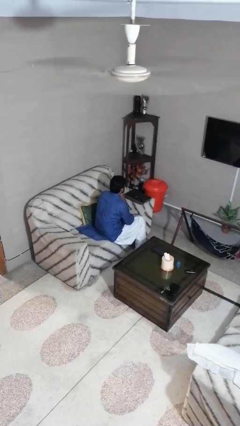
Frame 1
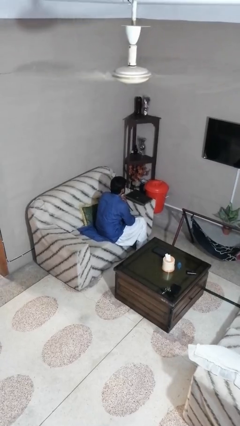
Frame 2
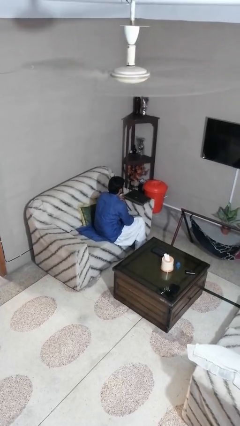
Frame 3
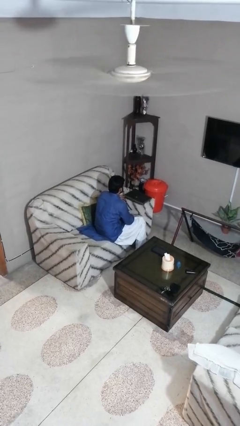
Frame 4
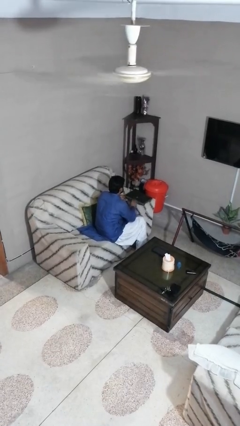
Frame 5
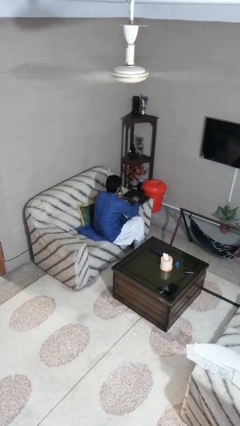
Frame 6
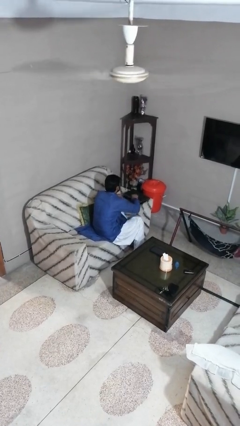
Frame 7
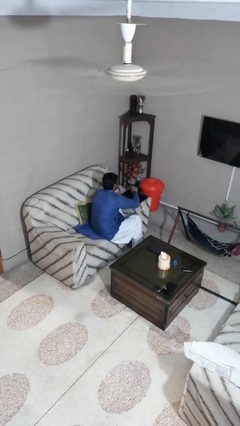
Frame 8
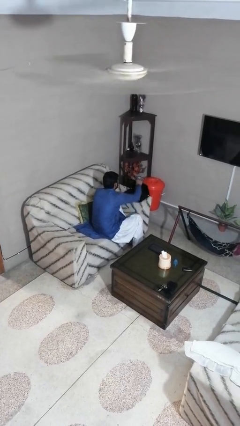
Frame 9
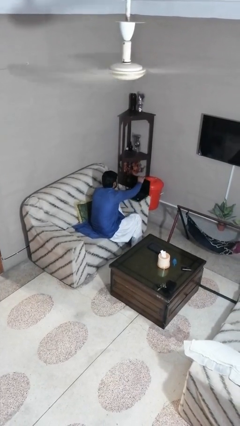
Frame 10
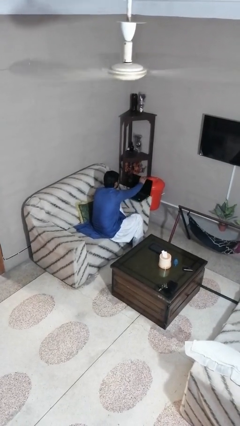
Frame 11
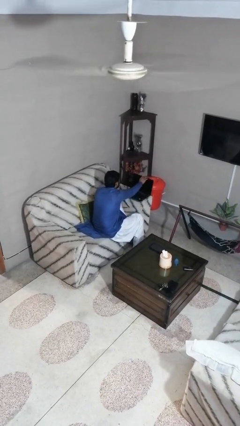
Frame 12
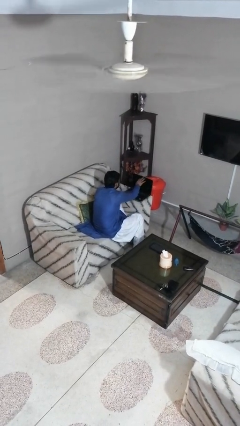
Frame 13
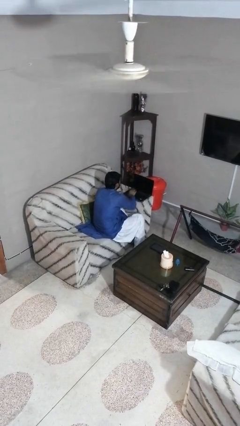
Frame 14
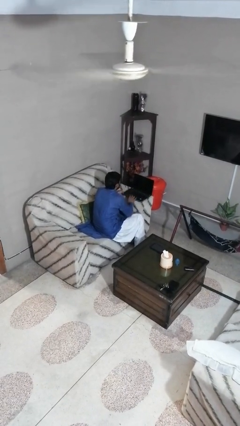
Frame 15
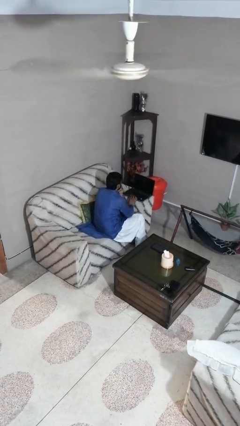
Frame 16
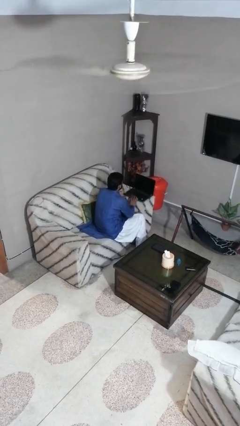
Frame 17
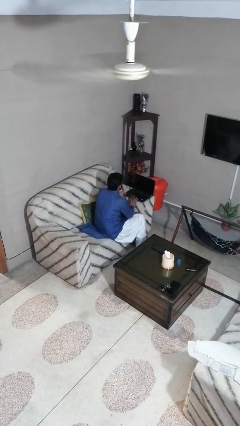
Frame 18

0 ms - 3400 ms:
person opens laptop

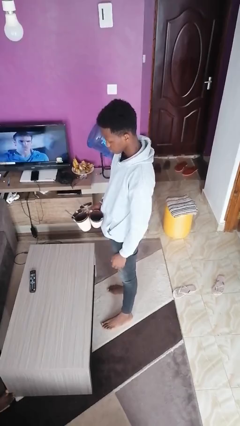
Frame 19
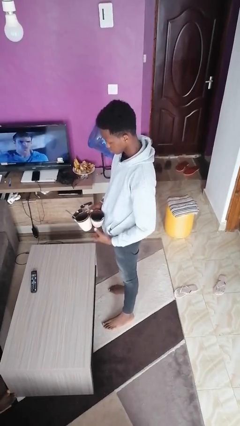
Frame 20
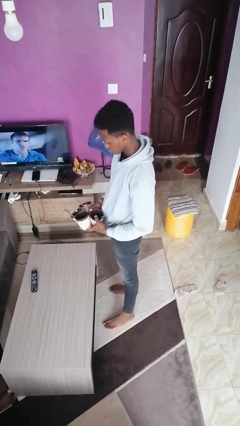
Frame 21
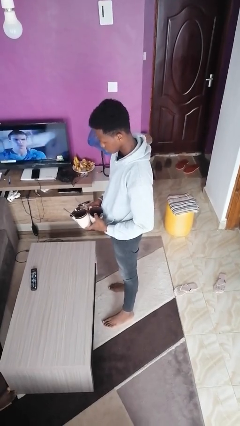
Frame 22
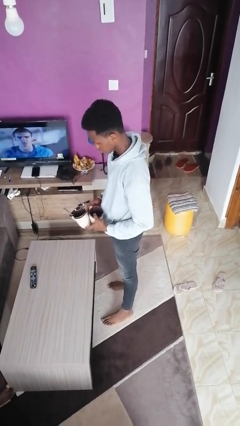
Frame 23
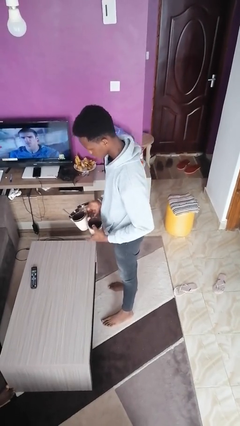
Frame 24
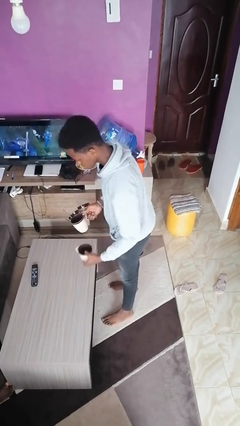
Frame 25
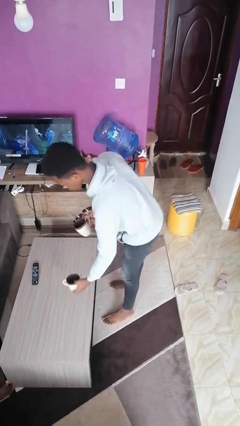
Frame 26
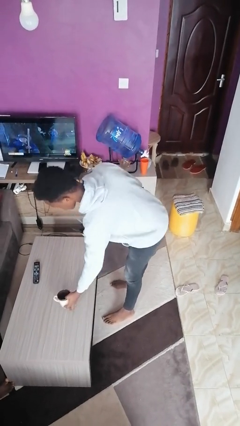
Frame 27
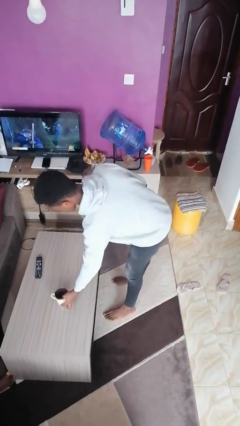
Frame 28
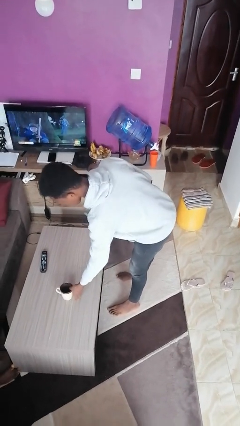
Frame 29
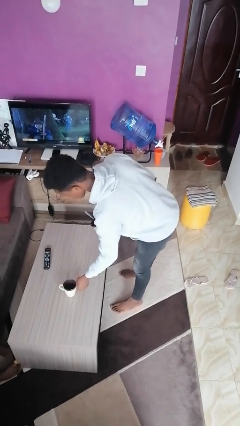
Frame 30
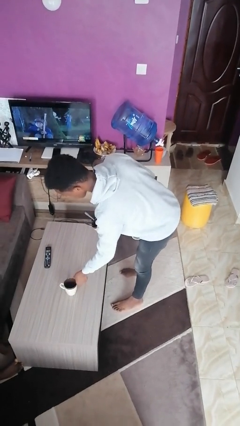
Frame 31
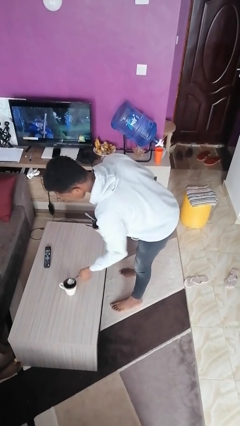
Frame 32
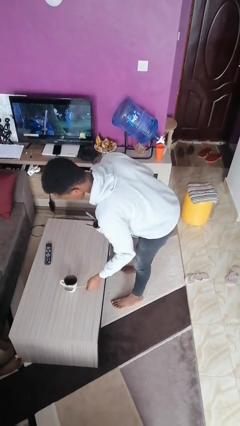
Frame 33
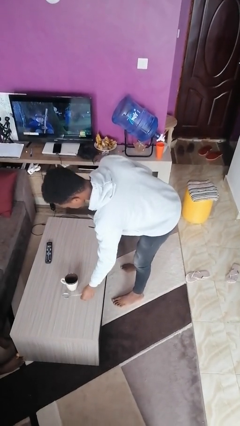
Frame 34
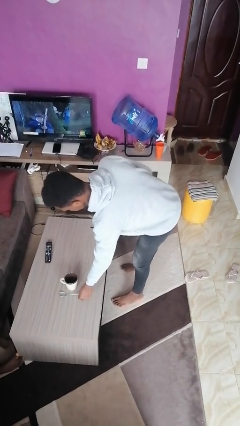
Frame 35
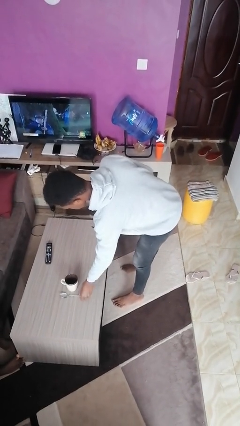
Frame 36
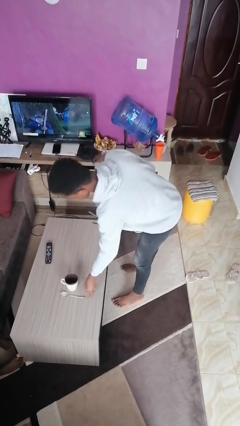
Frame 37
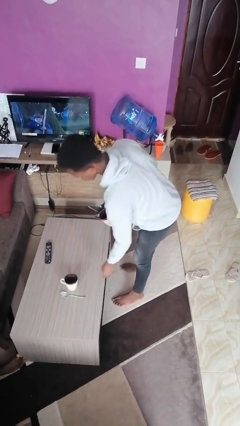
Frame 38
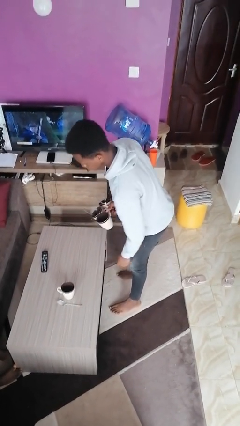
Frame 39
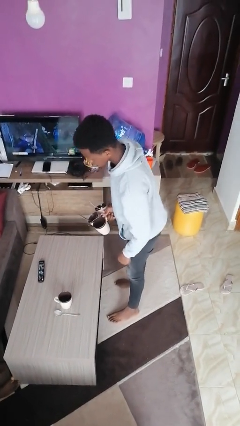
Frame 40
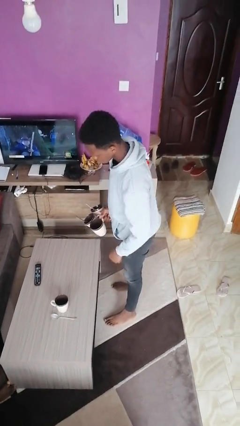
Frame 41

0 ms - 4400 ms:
person sets table

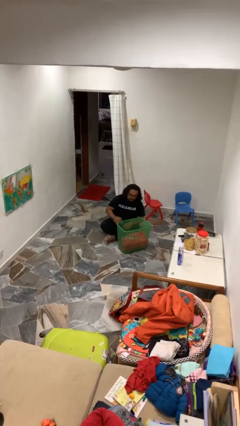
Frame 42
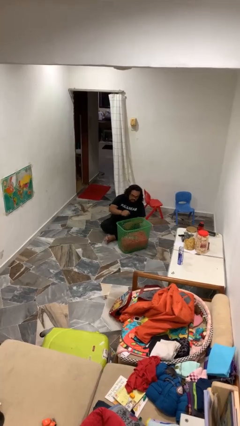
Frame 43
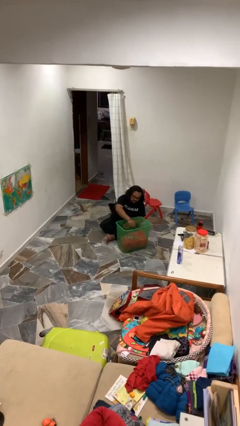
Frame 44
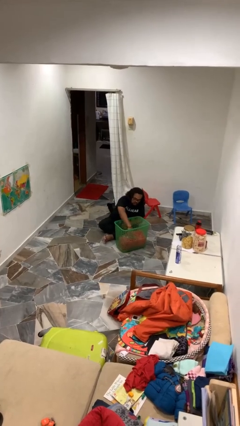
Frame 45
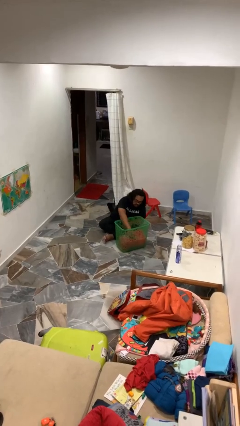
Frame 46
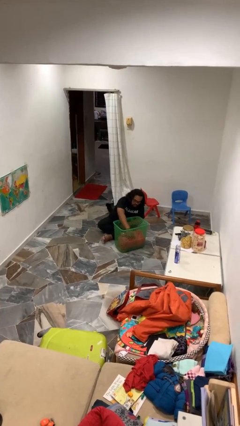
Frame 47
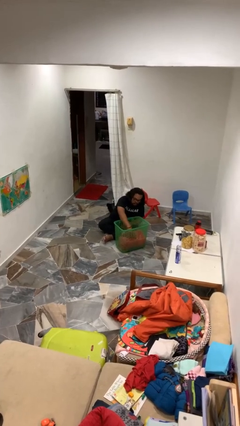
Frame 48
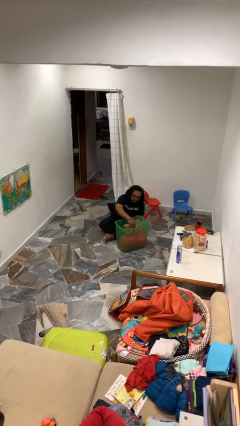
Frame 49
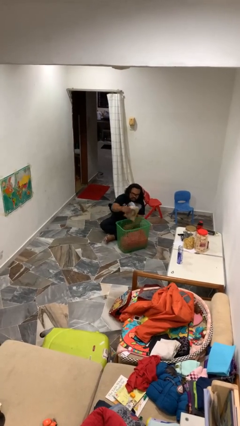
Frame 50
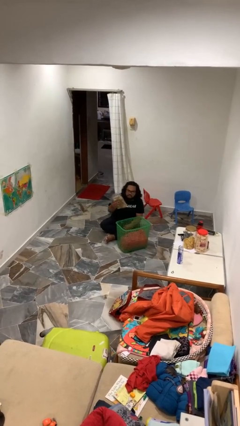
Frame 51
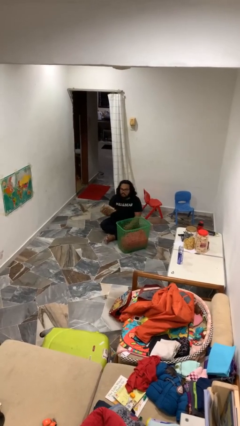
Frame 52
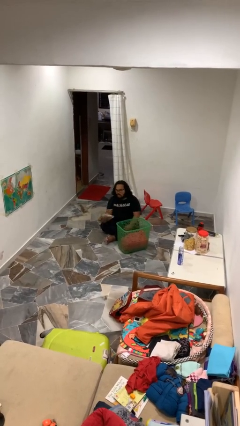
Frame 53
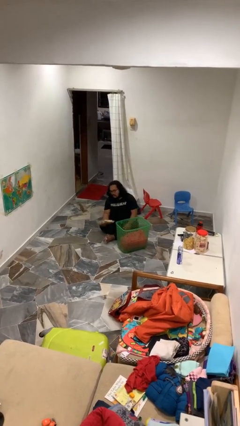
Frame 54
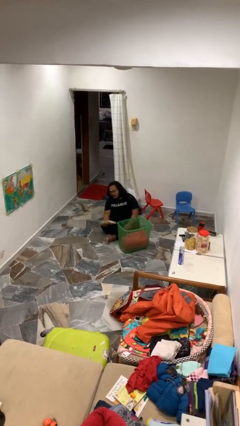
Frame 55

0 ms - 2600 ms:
person takes object from basket

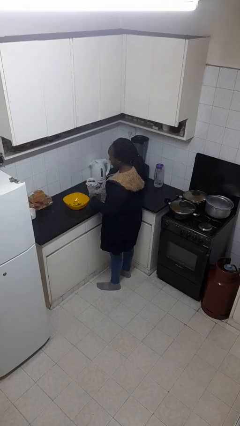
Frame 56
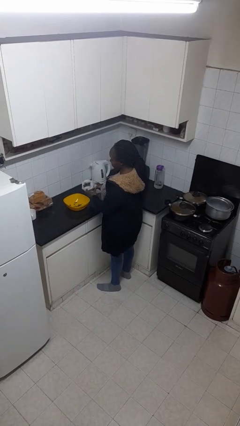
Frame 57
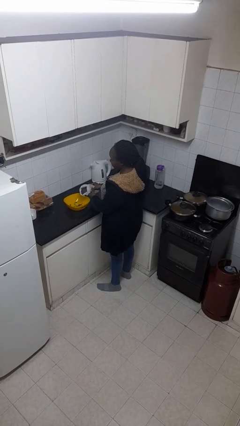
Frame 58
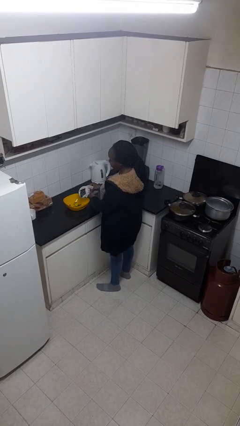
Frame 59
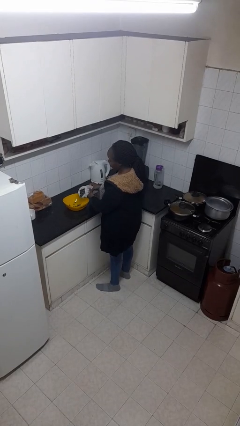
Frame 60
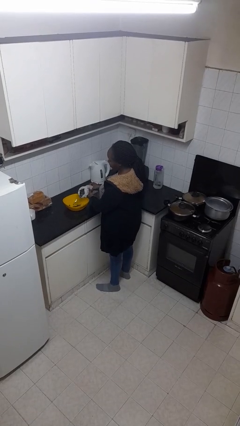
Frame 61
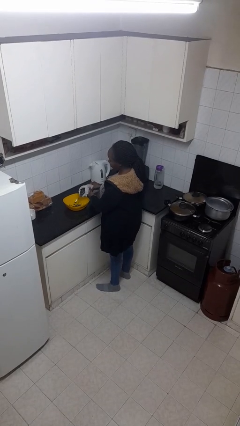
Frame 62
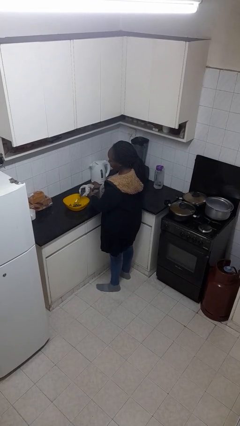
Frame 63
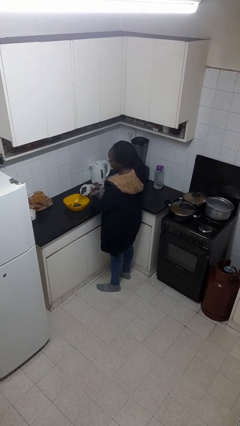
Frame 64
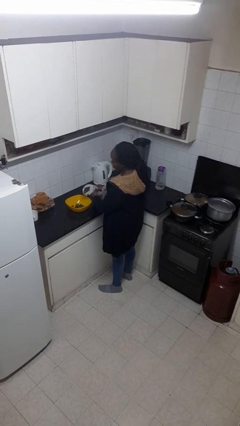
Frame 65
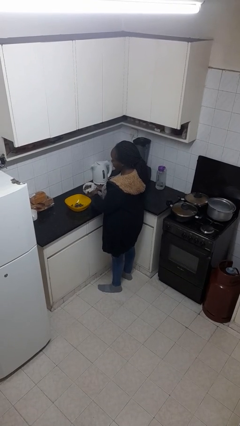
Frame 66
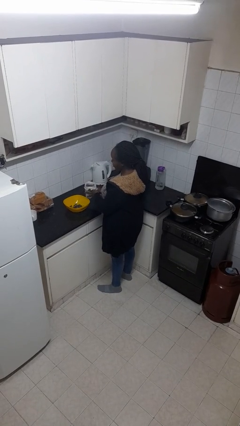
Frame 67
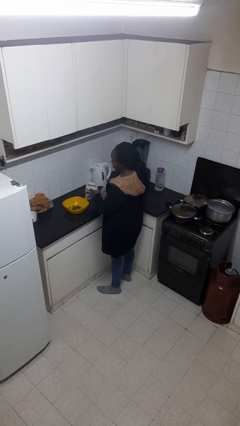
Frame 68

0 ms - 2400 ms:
person pours into bowl

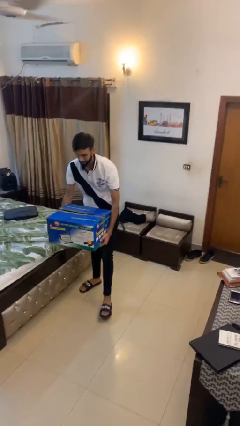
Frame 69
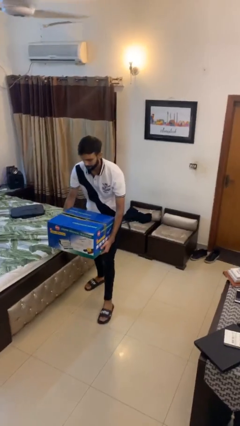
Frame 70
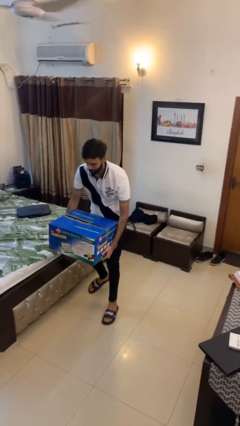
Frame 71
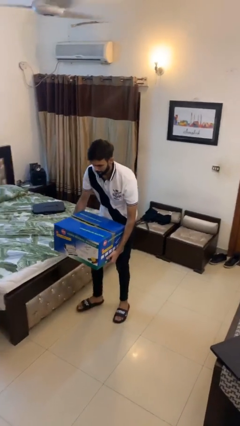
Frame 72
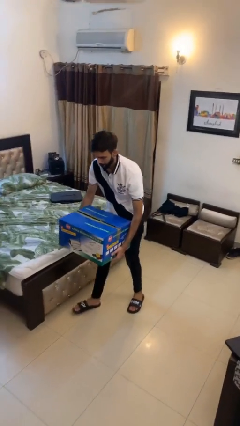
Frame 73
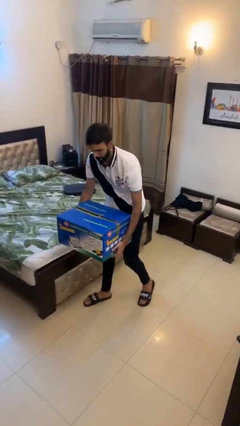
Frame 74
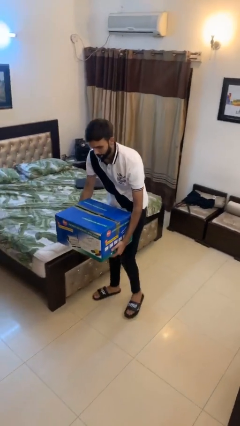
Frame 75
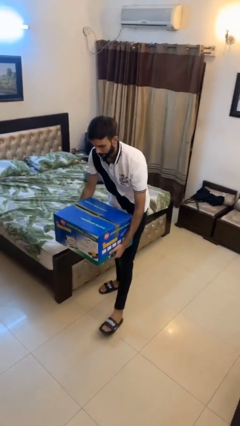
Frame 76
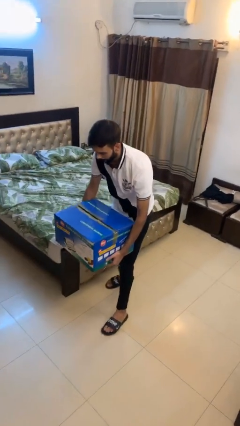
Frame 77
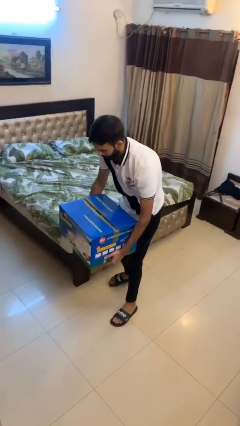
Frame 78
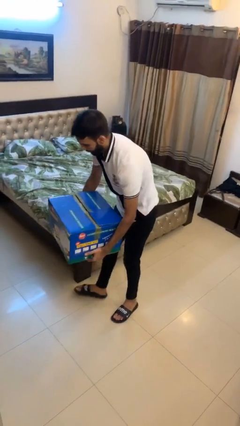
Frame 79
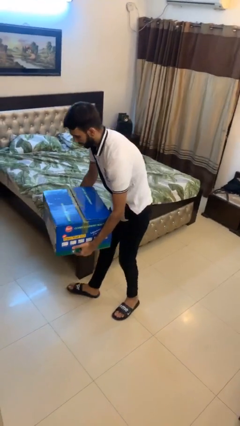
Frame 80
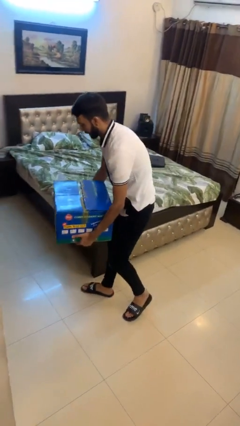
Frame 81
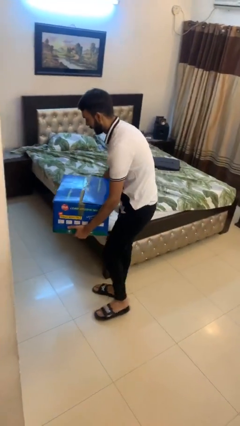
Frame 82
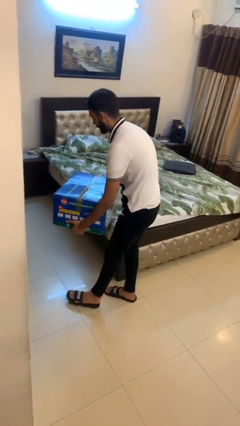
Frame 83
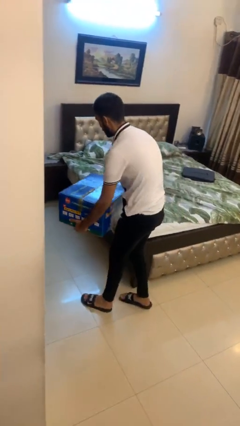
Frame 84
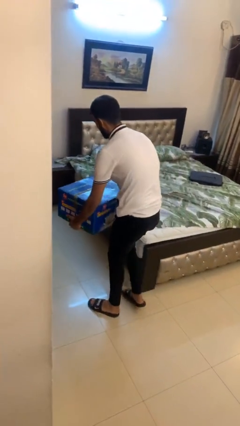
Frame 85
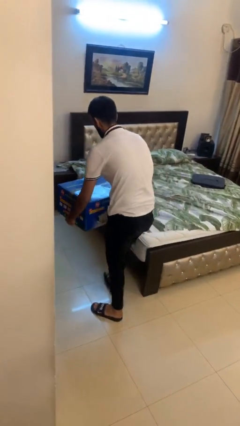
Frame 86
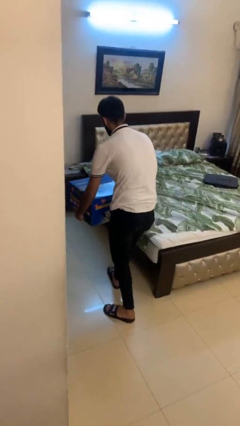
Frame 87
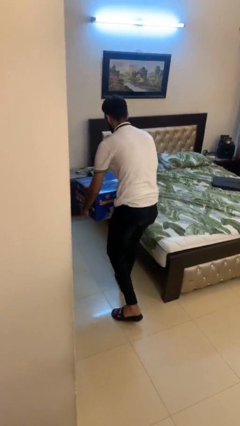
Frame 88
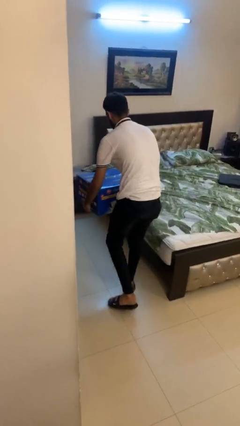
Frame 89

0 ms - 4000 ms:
person carries heavy object
